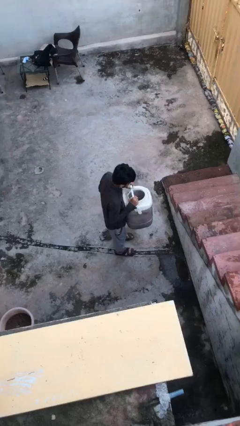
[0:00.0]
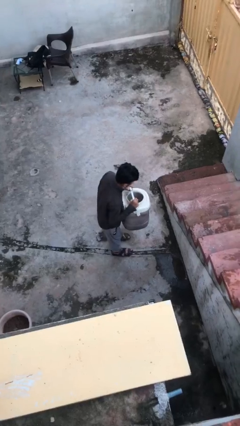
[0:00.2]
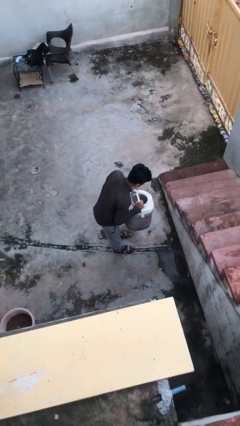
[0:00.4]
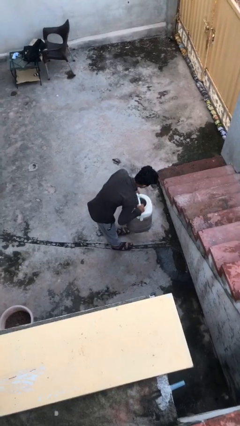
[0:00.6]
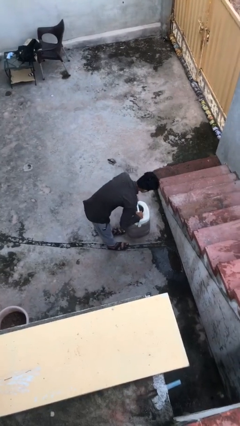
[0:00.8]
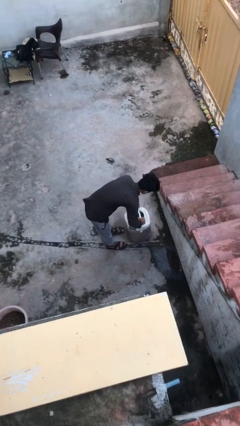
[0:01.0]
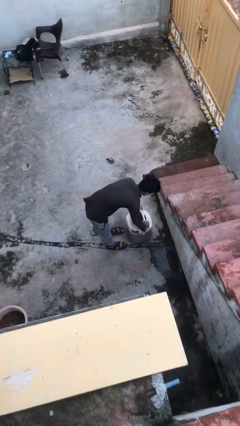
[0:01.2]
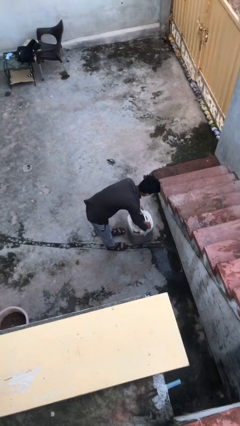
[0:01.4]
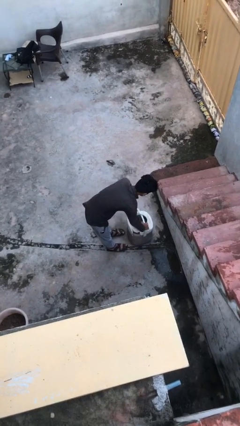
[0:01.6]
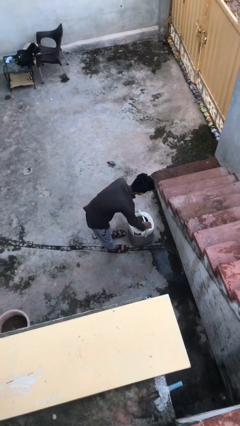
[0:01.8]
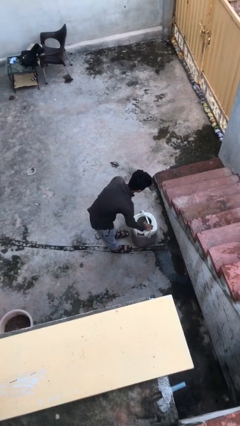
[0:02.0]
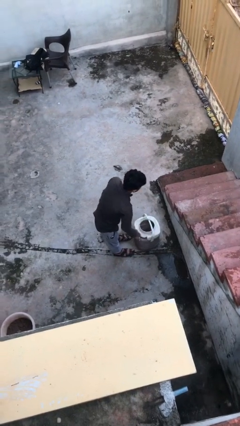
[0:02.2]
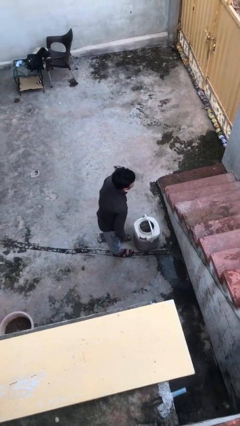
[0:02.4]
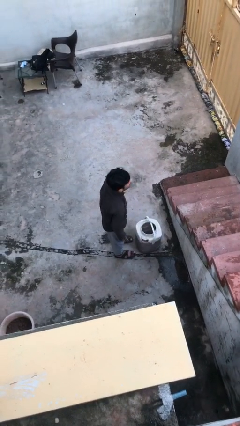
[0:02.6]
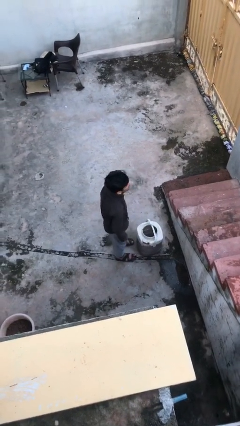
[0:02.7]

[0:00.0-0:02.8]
person puts down object on floor

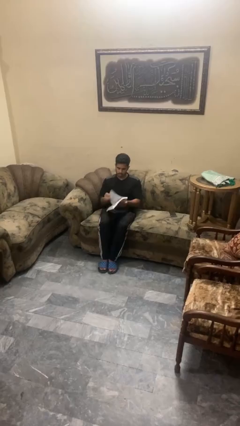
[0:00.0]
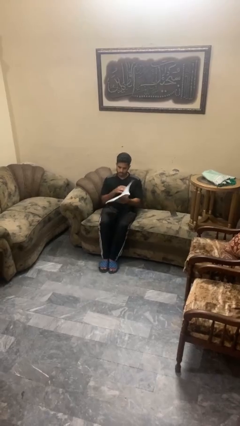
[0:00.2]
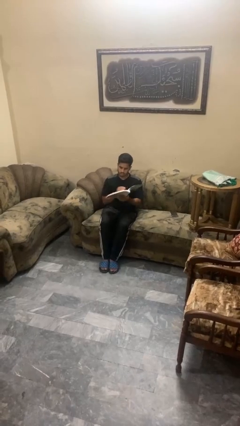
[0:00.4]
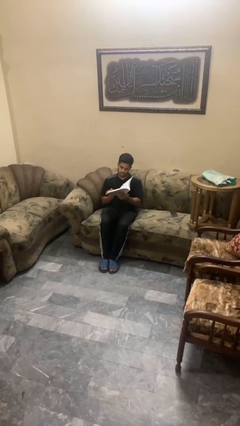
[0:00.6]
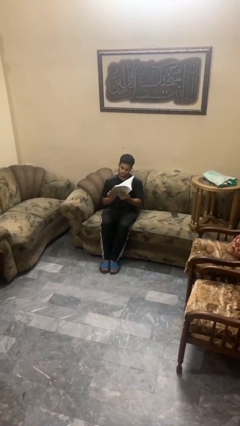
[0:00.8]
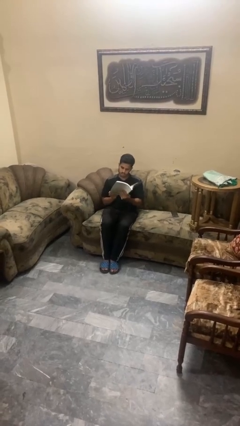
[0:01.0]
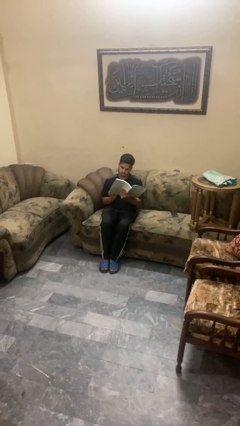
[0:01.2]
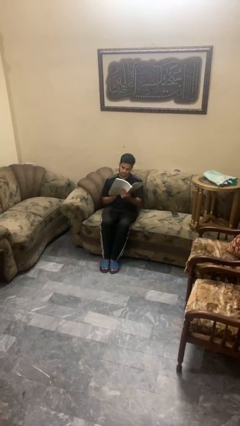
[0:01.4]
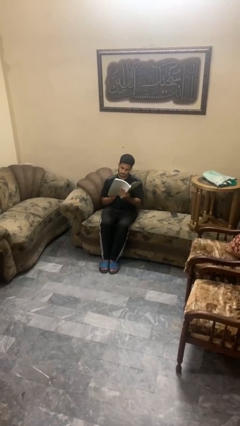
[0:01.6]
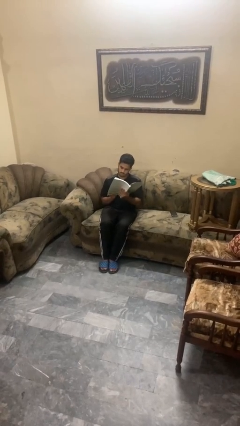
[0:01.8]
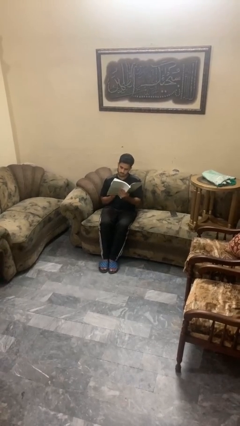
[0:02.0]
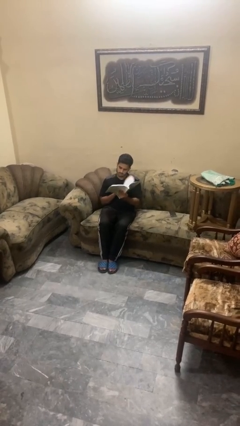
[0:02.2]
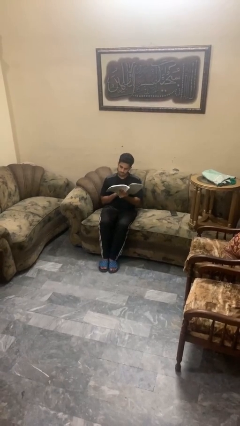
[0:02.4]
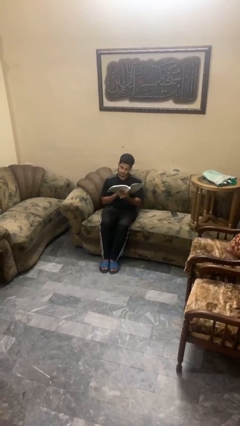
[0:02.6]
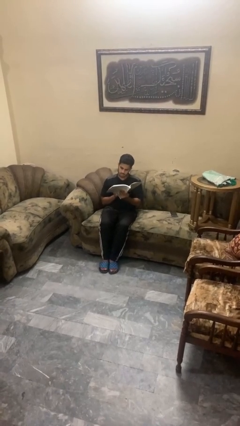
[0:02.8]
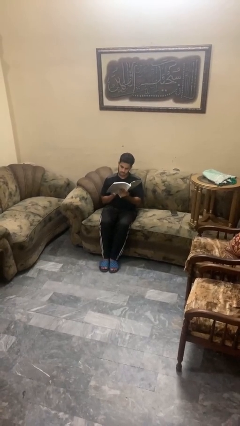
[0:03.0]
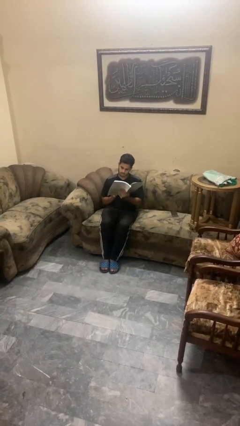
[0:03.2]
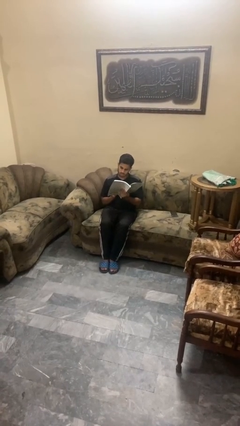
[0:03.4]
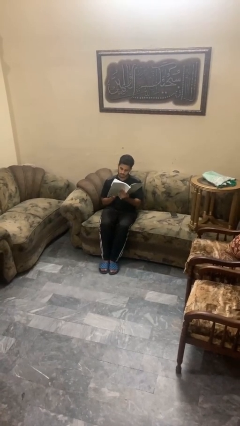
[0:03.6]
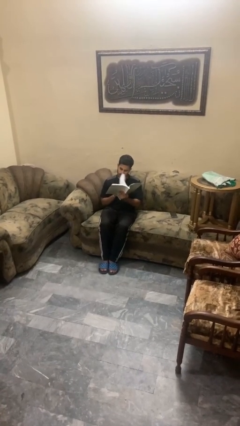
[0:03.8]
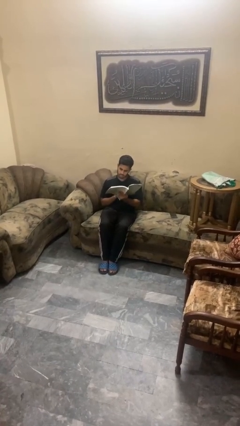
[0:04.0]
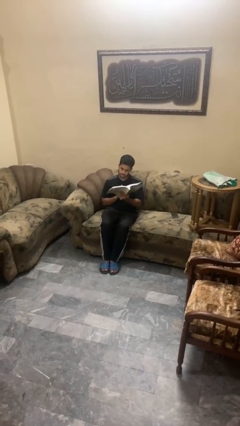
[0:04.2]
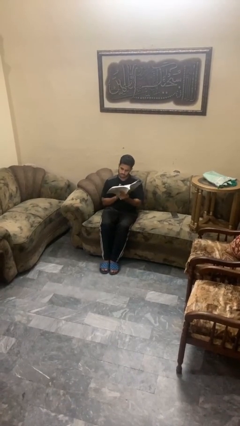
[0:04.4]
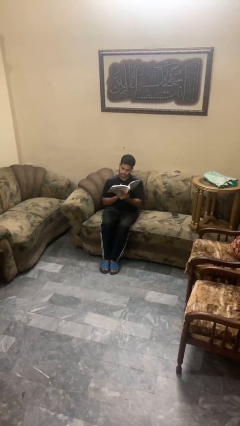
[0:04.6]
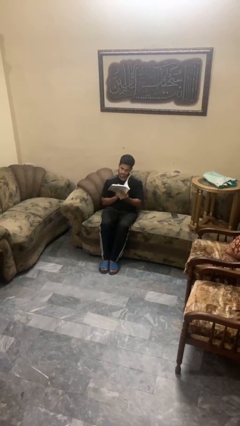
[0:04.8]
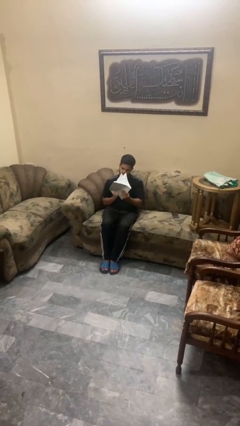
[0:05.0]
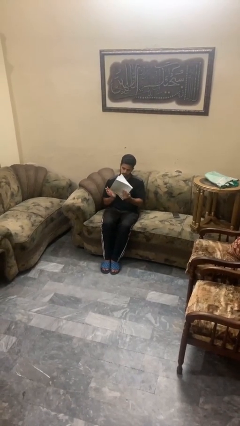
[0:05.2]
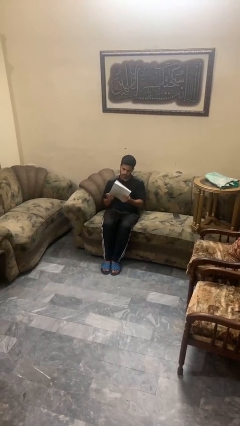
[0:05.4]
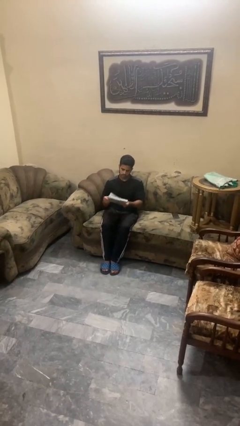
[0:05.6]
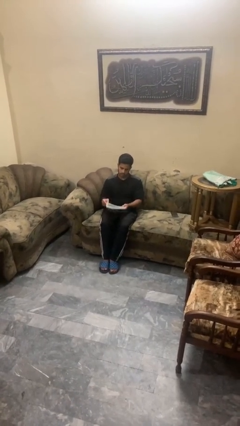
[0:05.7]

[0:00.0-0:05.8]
person reads book

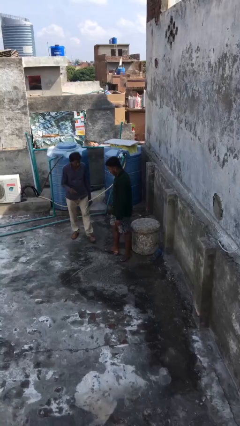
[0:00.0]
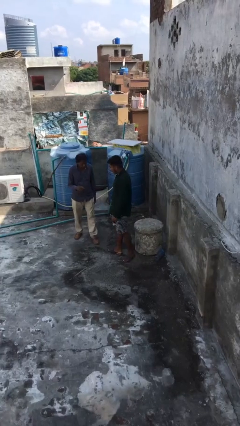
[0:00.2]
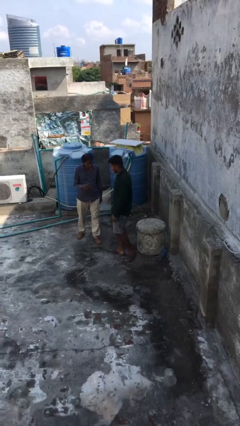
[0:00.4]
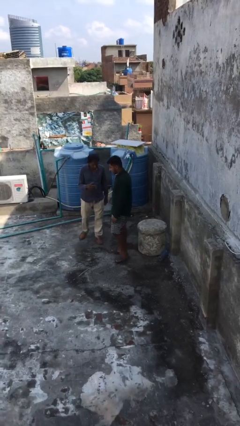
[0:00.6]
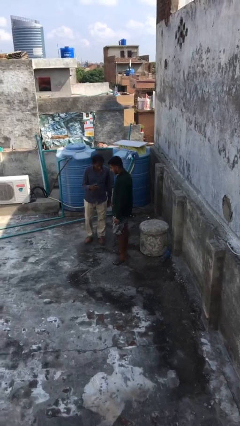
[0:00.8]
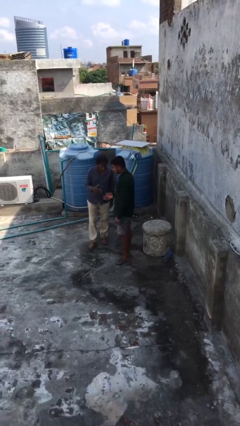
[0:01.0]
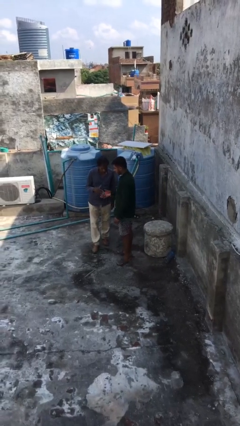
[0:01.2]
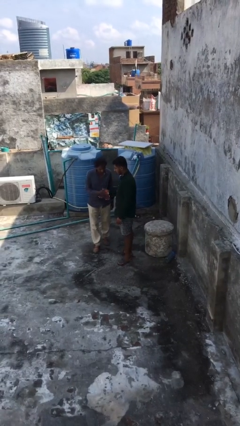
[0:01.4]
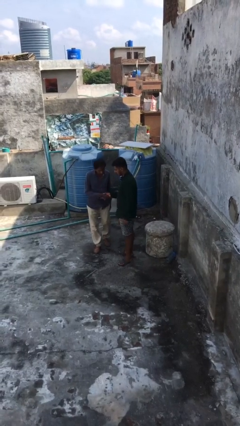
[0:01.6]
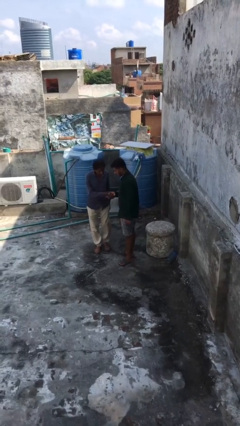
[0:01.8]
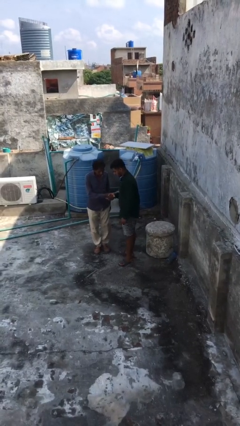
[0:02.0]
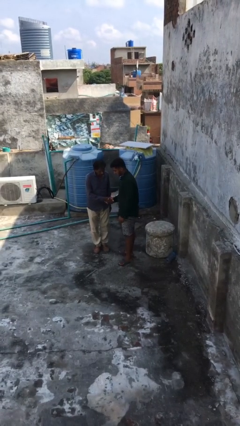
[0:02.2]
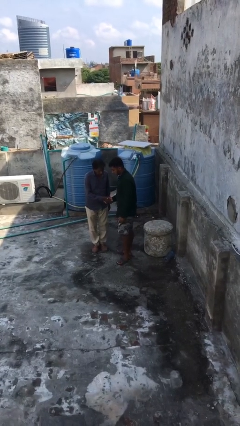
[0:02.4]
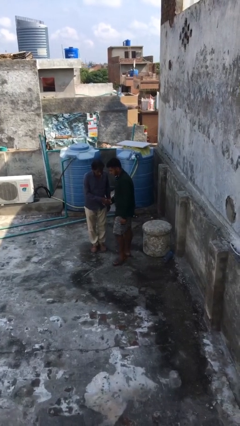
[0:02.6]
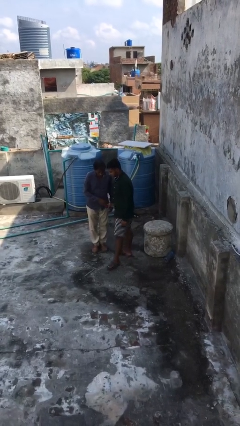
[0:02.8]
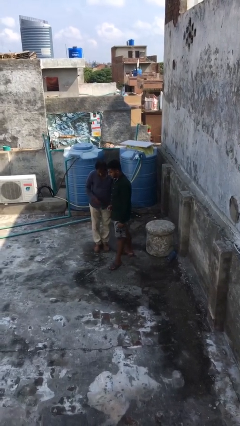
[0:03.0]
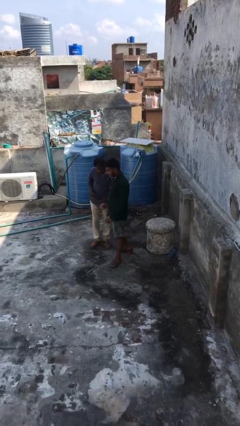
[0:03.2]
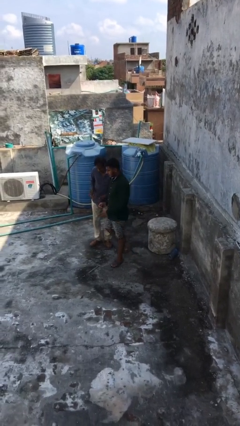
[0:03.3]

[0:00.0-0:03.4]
person shakes hand

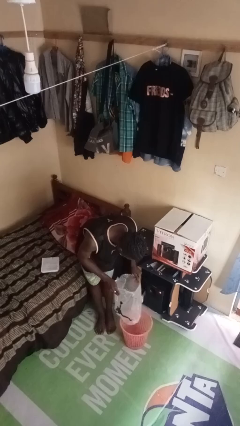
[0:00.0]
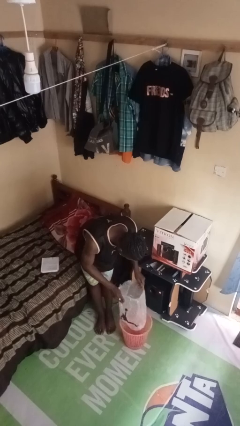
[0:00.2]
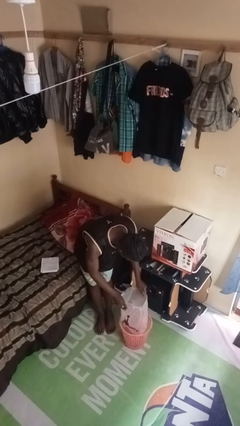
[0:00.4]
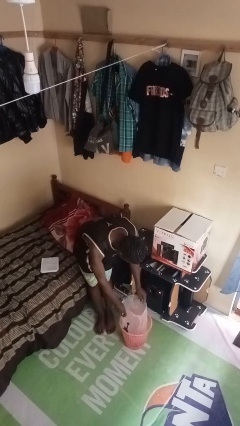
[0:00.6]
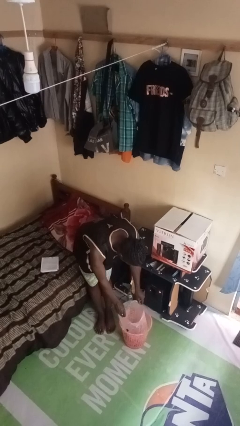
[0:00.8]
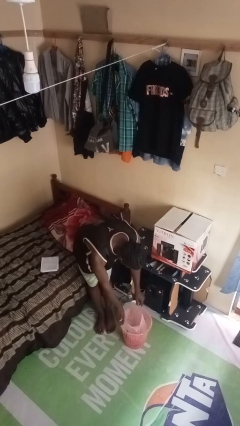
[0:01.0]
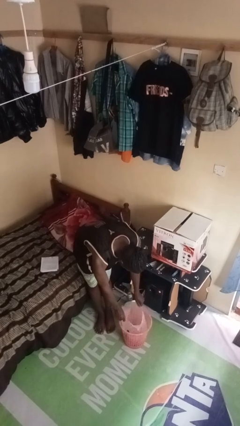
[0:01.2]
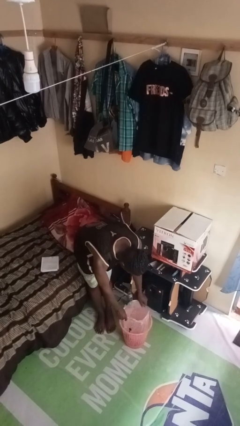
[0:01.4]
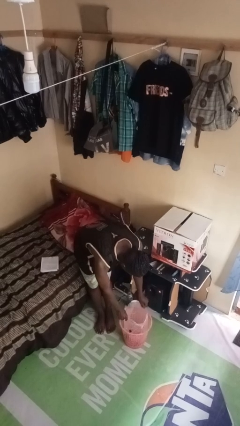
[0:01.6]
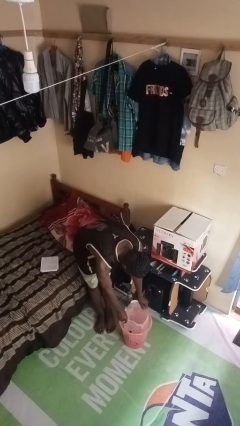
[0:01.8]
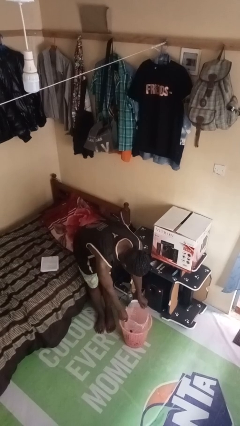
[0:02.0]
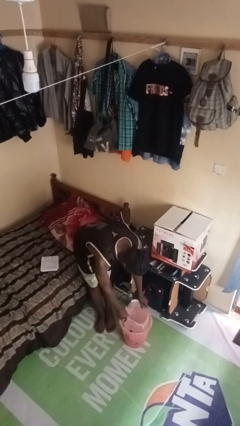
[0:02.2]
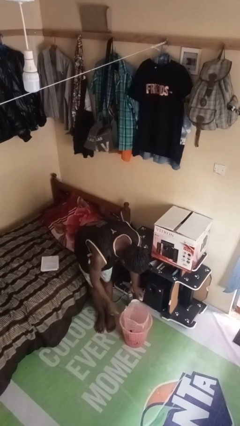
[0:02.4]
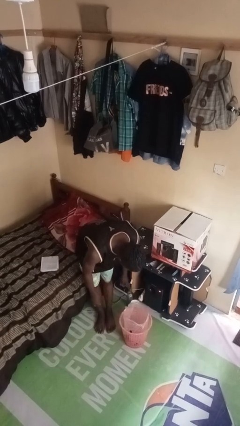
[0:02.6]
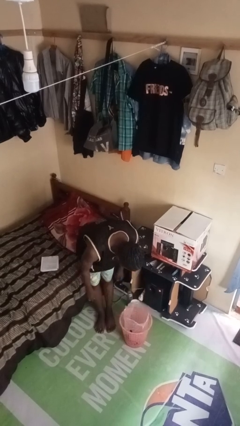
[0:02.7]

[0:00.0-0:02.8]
person inserts trashbag into trashcan

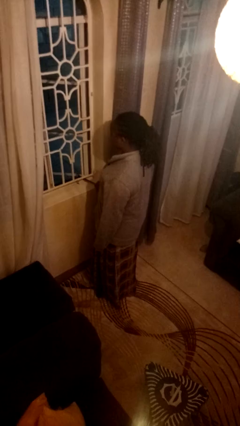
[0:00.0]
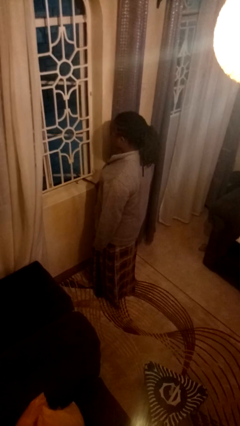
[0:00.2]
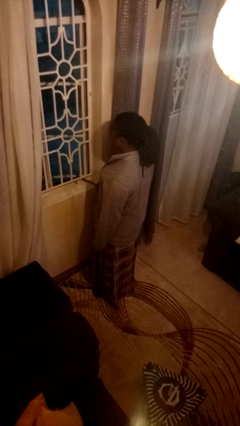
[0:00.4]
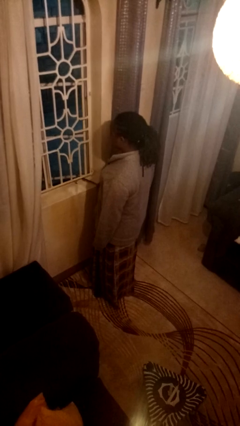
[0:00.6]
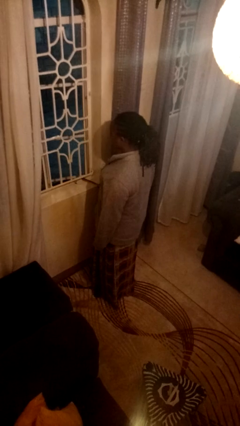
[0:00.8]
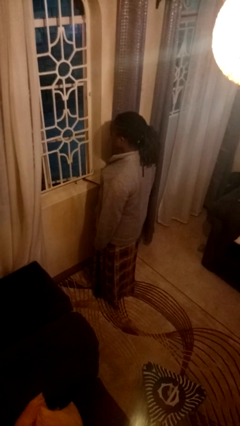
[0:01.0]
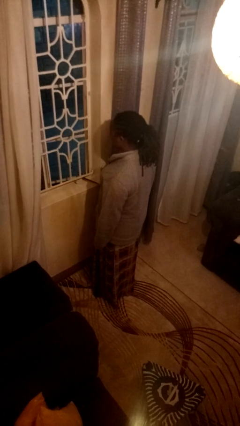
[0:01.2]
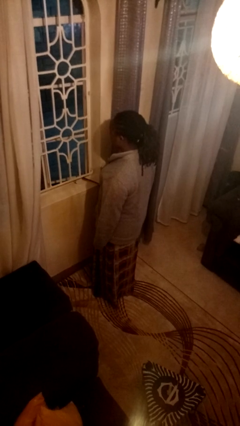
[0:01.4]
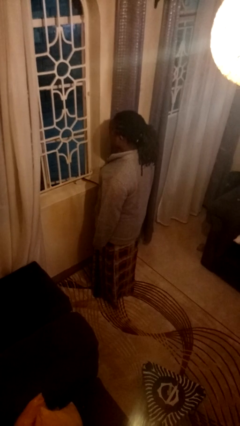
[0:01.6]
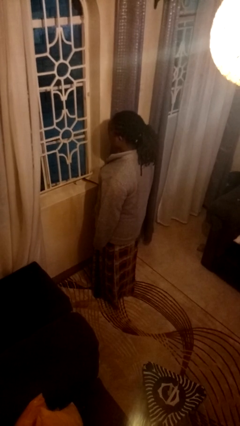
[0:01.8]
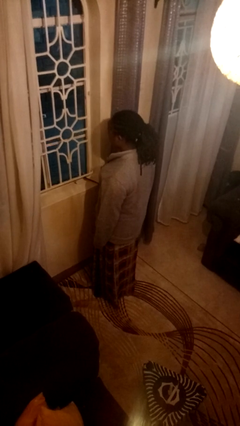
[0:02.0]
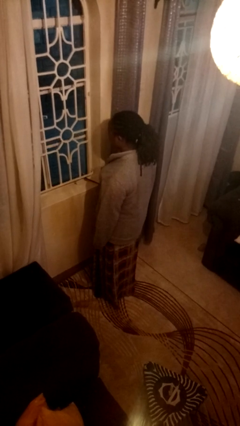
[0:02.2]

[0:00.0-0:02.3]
person closes home window

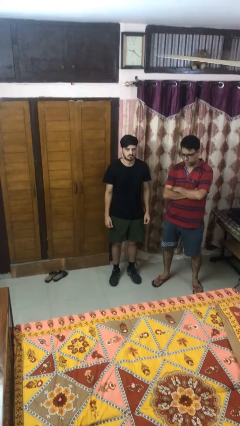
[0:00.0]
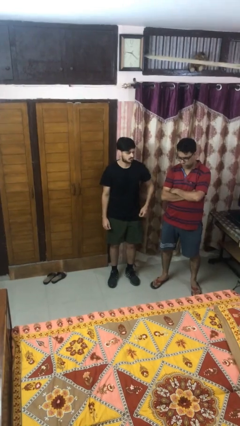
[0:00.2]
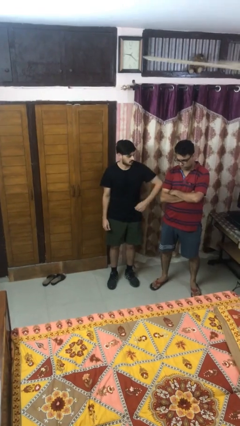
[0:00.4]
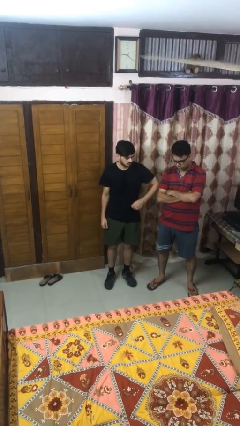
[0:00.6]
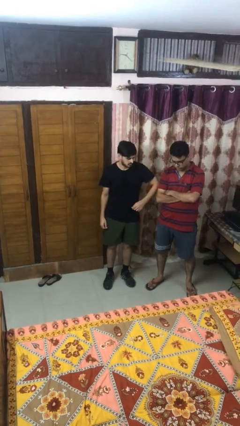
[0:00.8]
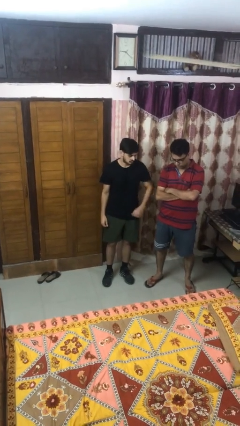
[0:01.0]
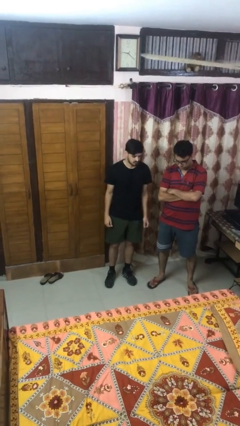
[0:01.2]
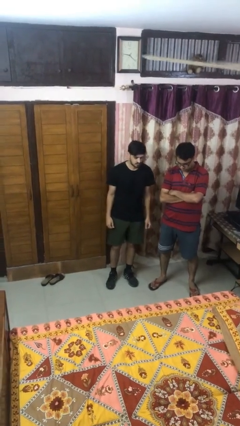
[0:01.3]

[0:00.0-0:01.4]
person nudges person with elbow
